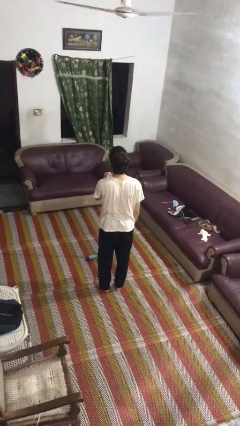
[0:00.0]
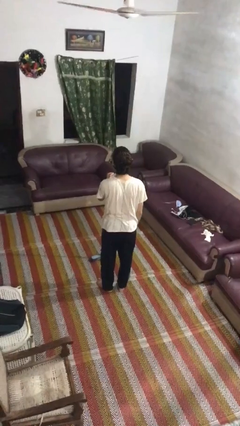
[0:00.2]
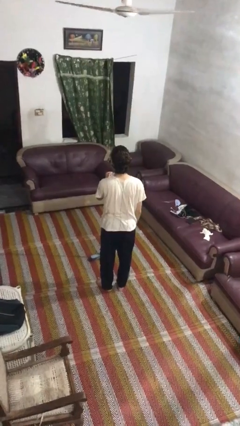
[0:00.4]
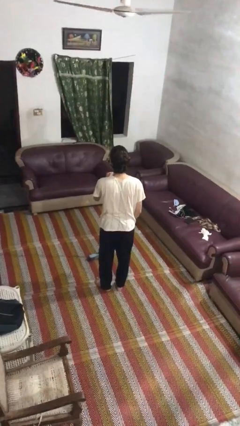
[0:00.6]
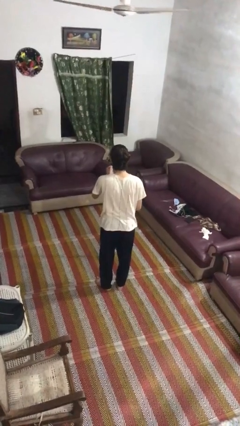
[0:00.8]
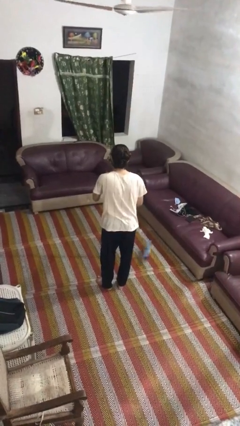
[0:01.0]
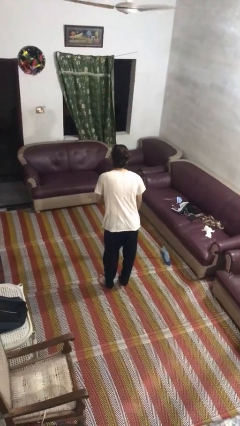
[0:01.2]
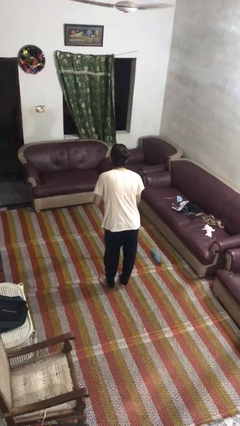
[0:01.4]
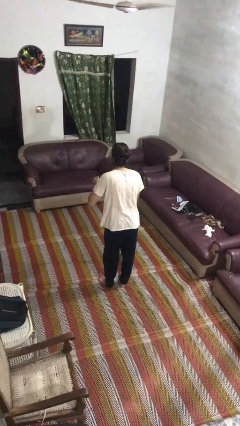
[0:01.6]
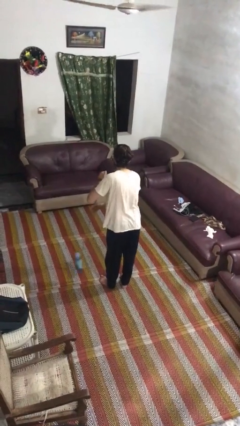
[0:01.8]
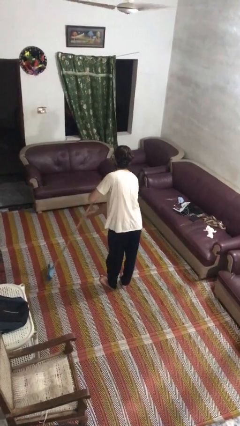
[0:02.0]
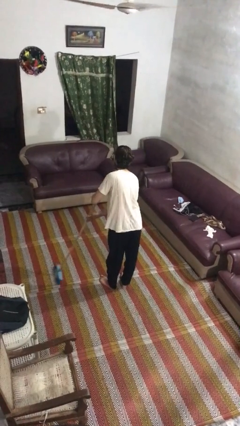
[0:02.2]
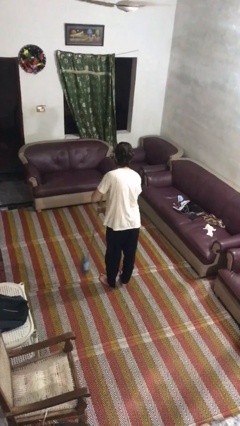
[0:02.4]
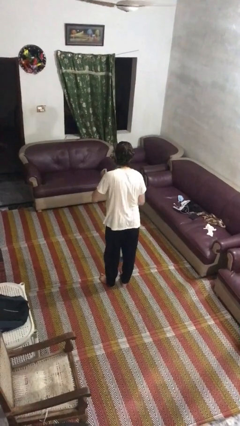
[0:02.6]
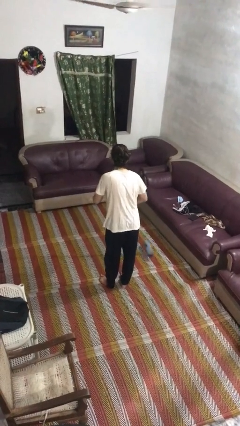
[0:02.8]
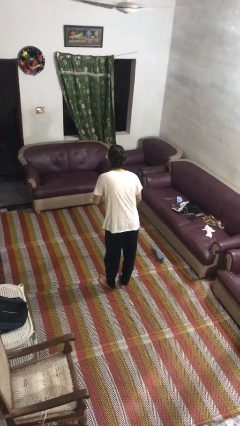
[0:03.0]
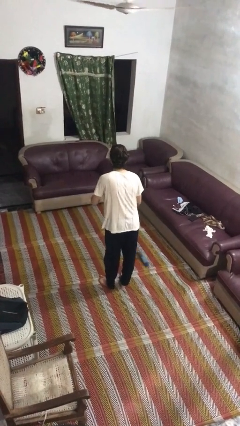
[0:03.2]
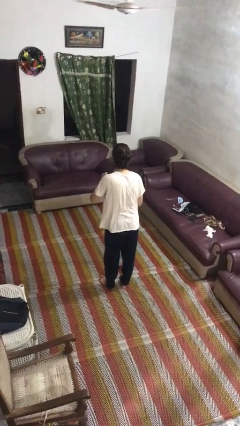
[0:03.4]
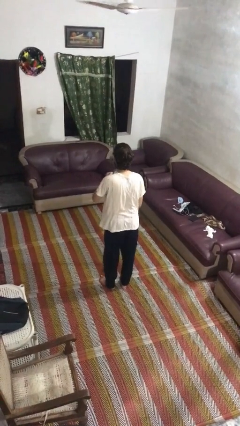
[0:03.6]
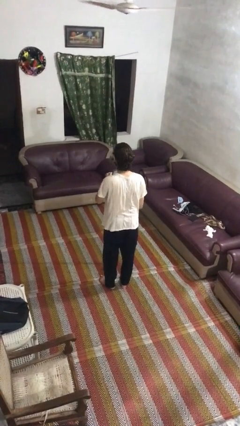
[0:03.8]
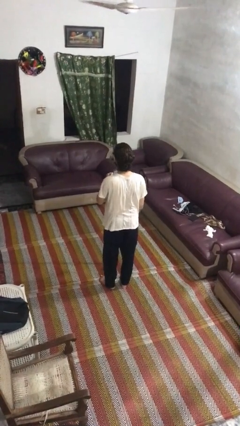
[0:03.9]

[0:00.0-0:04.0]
person sweeps floor

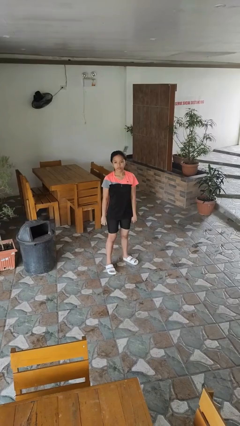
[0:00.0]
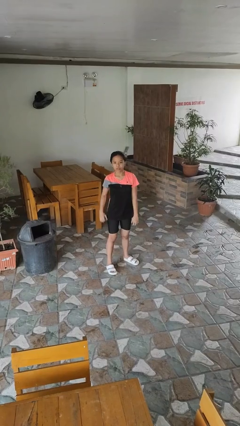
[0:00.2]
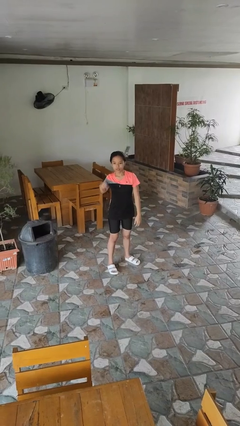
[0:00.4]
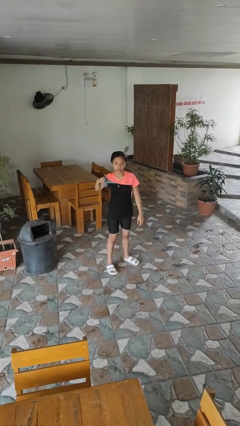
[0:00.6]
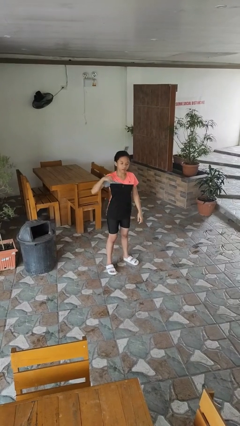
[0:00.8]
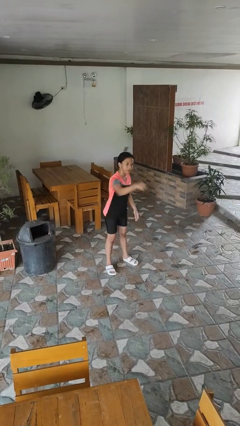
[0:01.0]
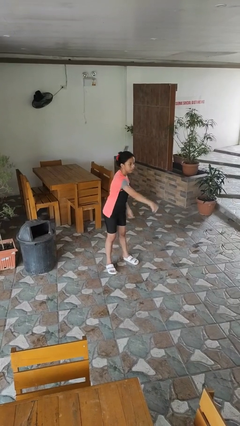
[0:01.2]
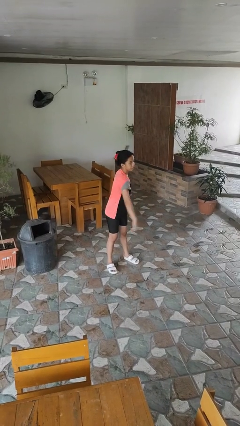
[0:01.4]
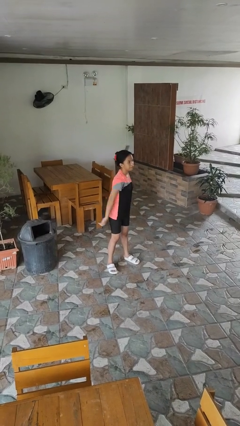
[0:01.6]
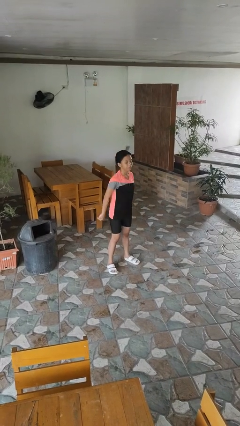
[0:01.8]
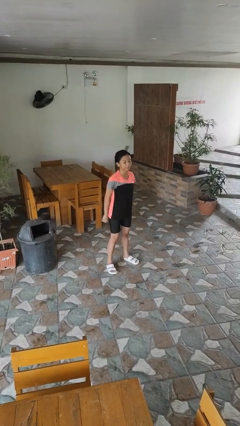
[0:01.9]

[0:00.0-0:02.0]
person punches

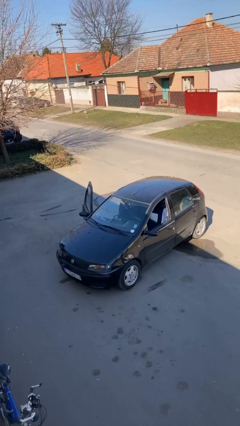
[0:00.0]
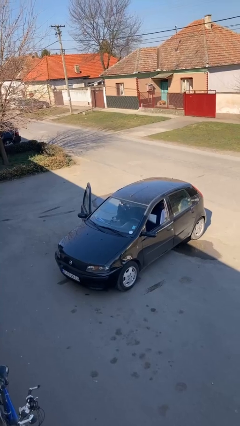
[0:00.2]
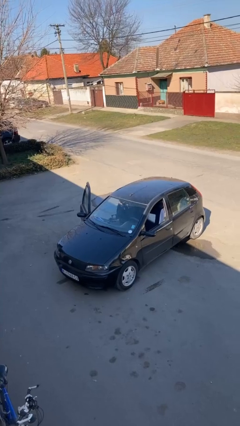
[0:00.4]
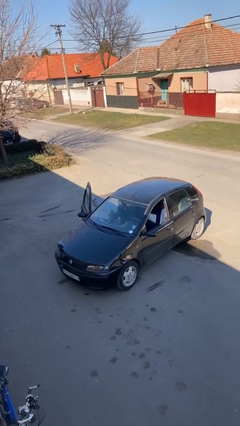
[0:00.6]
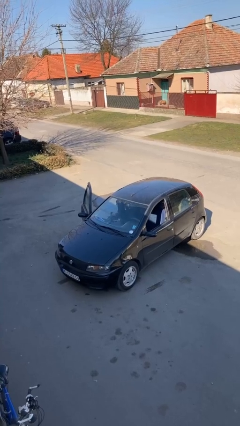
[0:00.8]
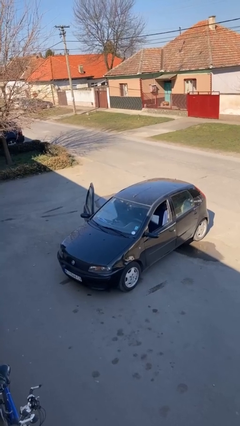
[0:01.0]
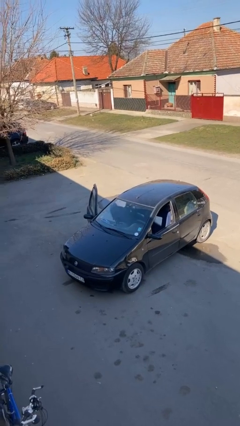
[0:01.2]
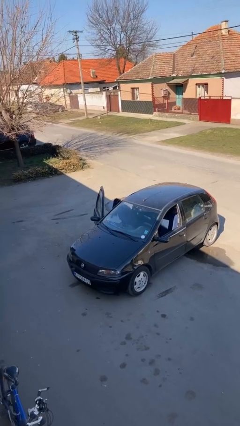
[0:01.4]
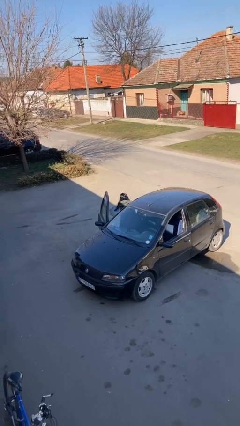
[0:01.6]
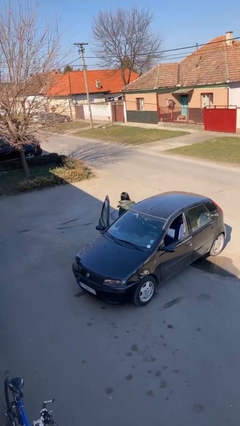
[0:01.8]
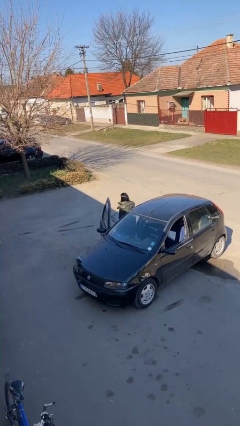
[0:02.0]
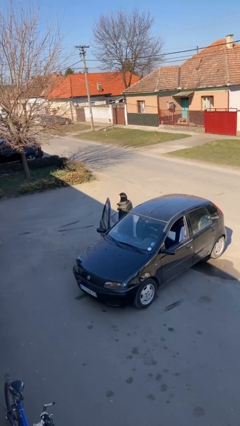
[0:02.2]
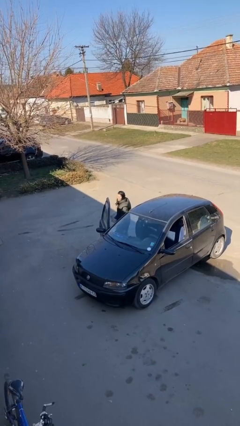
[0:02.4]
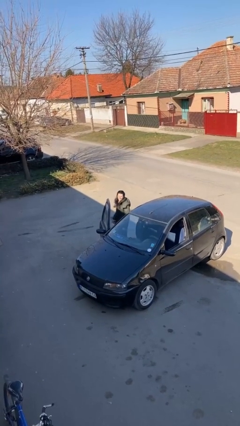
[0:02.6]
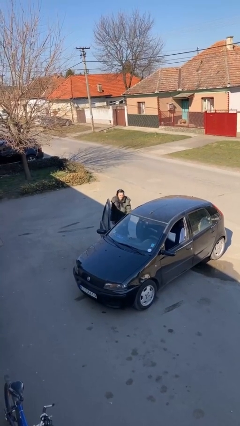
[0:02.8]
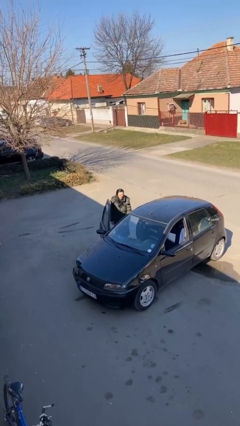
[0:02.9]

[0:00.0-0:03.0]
person exits car

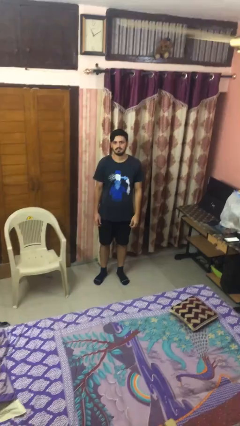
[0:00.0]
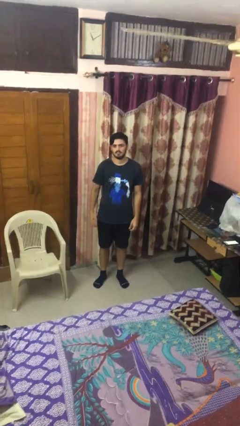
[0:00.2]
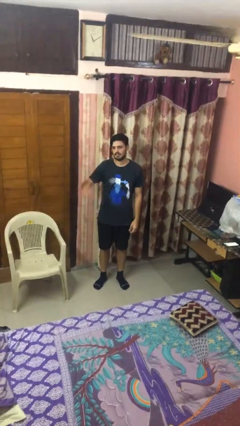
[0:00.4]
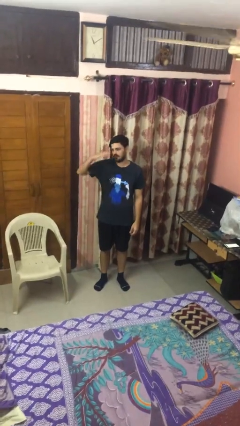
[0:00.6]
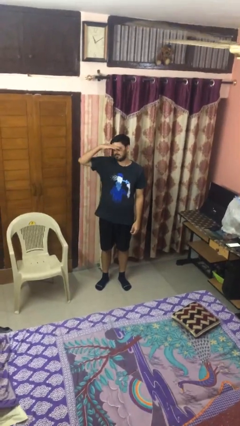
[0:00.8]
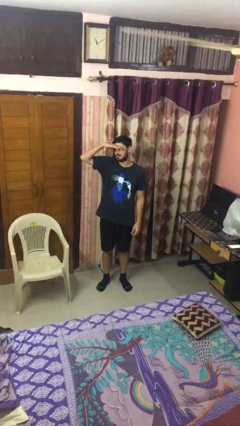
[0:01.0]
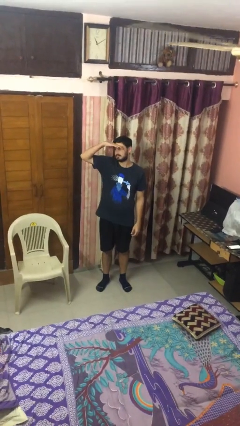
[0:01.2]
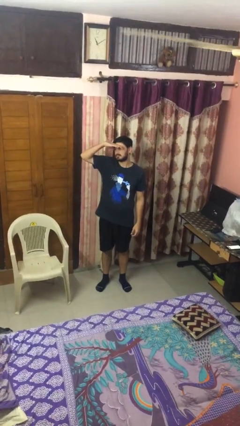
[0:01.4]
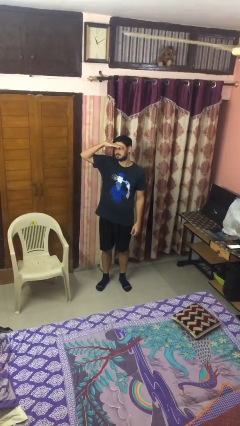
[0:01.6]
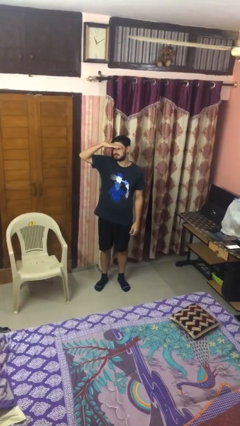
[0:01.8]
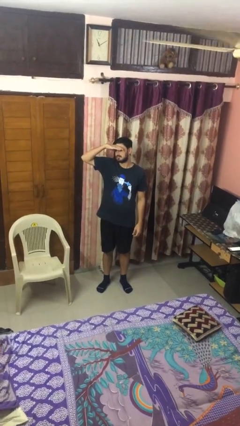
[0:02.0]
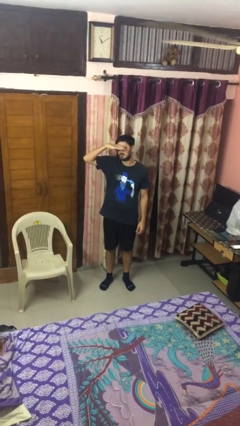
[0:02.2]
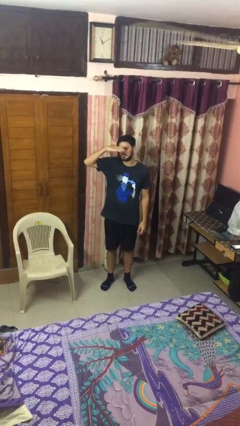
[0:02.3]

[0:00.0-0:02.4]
person shades eyes

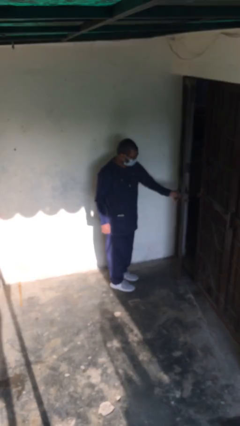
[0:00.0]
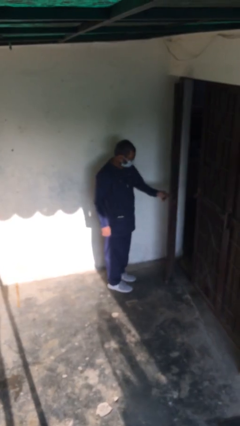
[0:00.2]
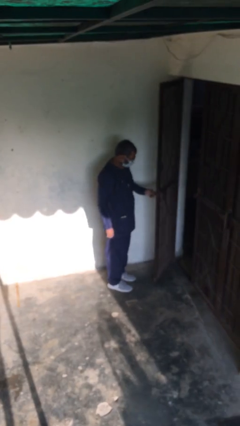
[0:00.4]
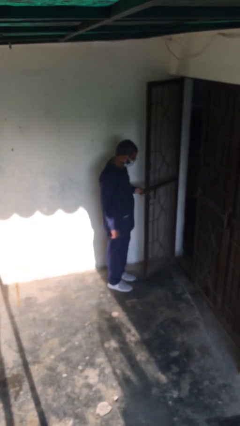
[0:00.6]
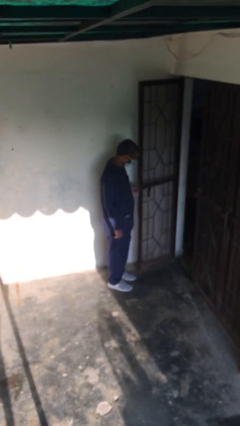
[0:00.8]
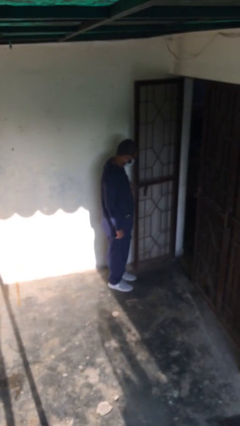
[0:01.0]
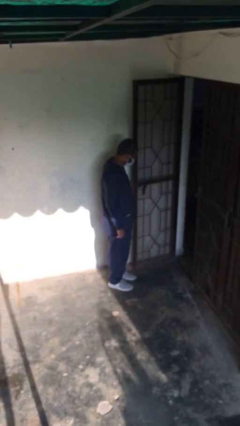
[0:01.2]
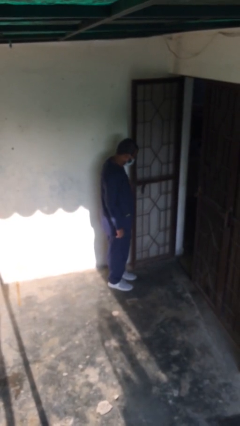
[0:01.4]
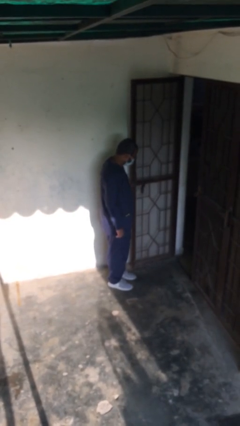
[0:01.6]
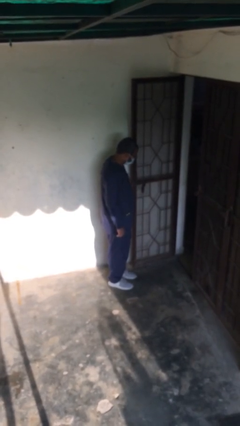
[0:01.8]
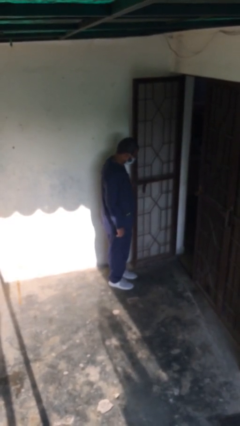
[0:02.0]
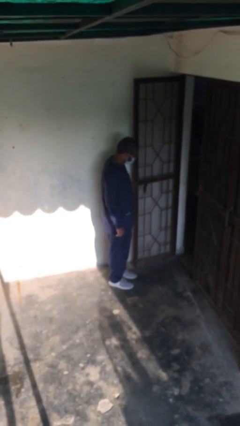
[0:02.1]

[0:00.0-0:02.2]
person opens facility door

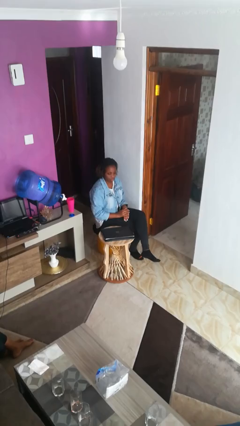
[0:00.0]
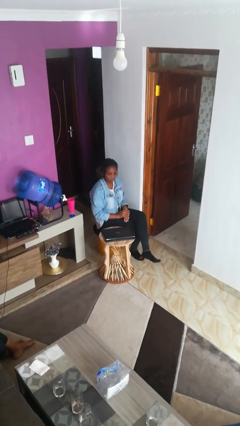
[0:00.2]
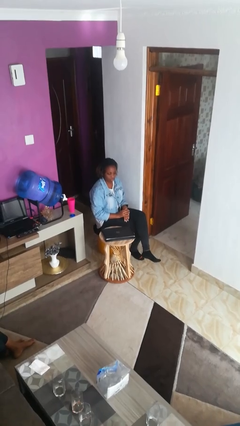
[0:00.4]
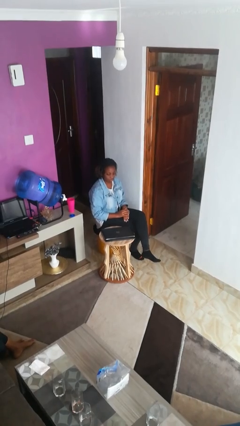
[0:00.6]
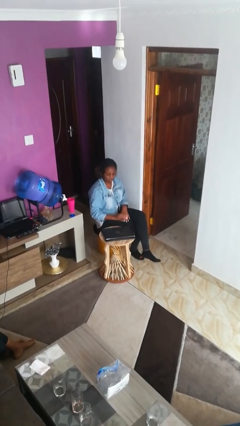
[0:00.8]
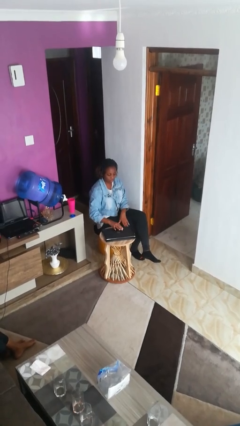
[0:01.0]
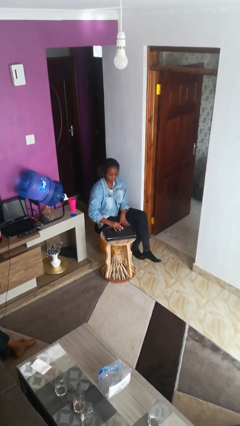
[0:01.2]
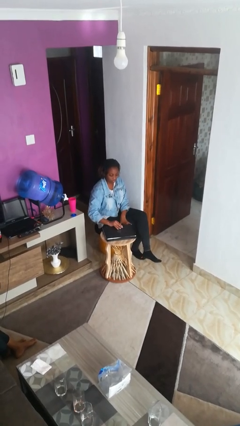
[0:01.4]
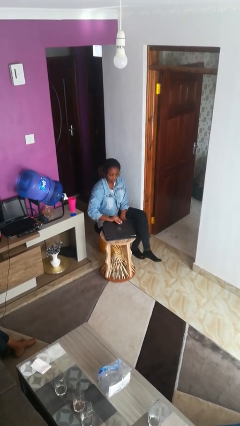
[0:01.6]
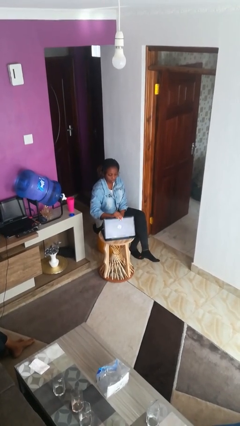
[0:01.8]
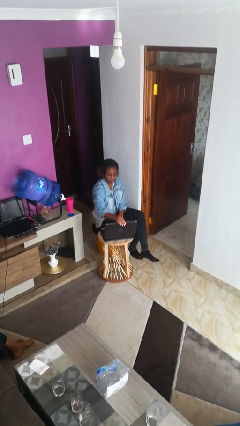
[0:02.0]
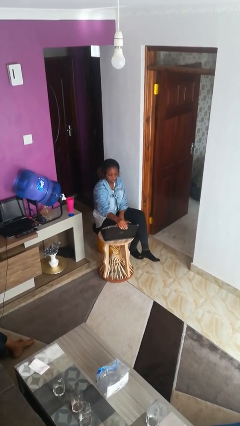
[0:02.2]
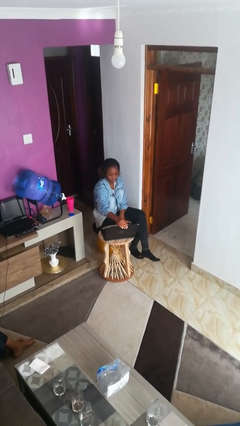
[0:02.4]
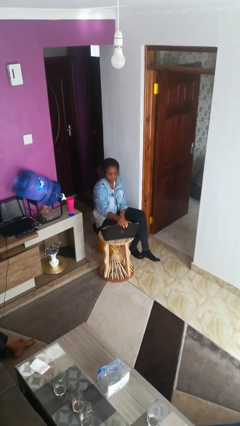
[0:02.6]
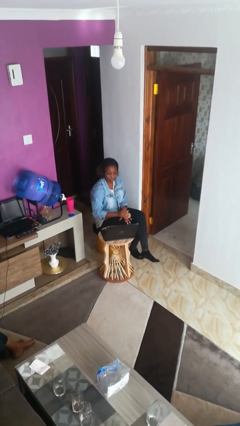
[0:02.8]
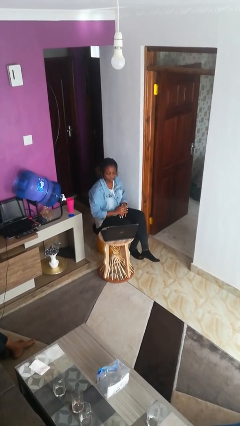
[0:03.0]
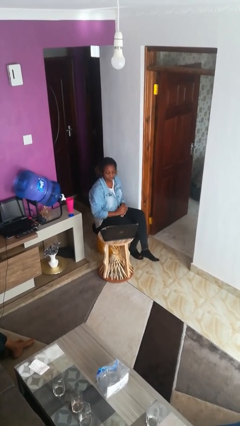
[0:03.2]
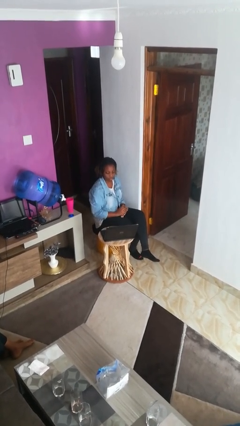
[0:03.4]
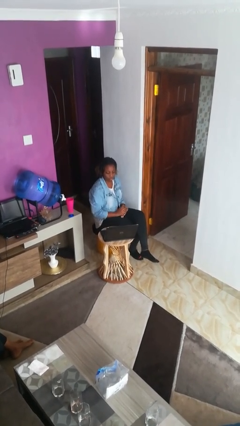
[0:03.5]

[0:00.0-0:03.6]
person opens laptop

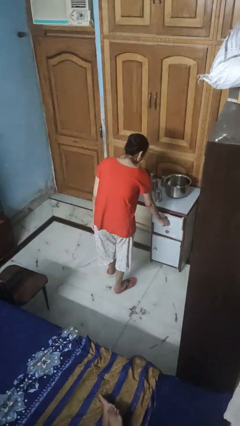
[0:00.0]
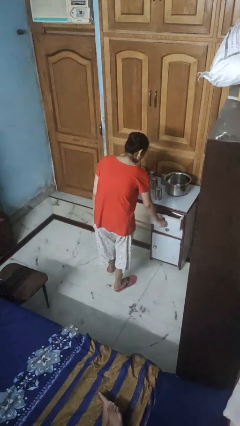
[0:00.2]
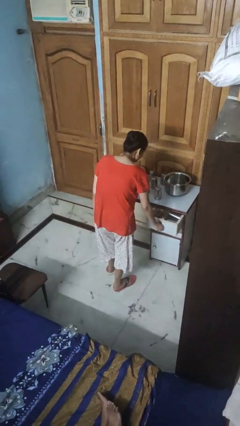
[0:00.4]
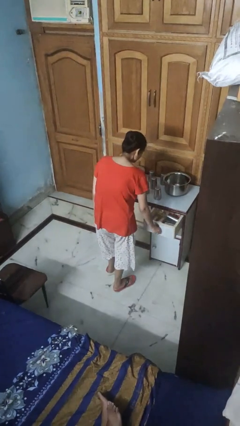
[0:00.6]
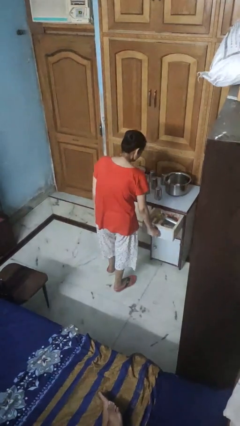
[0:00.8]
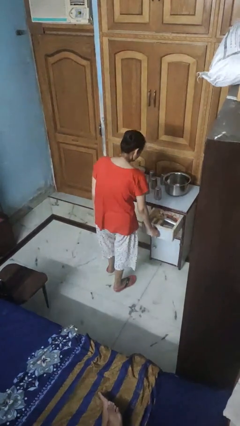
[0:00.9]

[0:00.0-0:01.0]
person opens kitchen drawer
